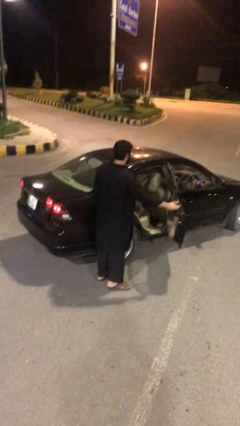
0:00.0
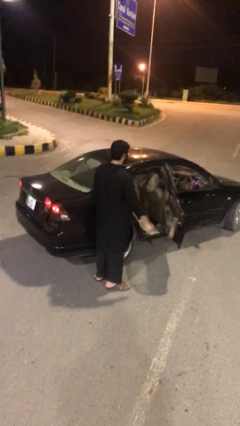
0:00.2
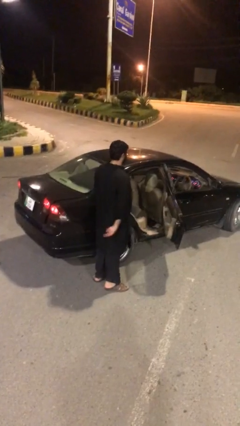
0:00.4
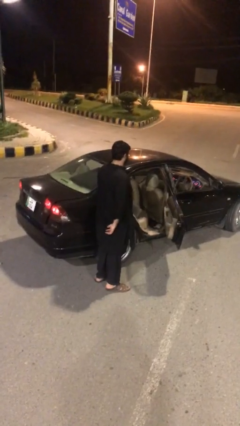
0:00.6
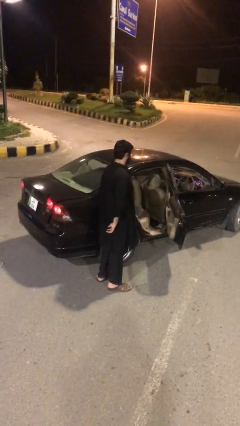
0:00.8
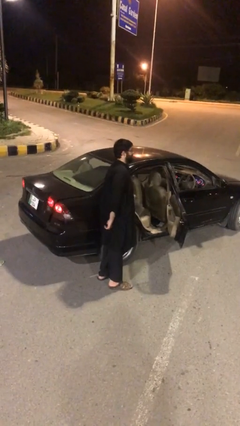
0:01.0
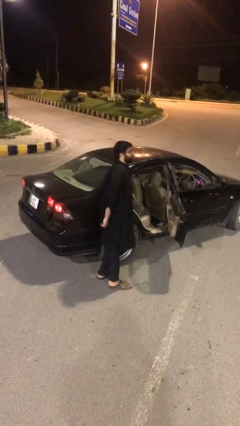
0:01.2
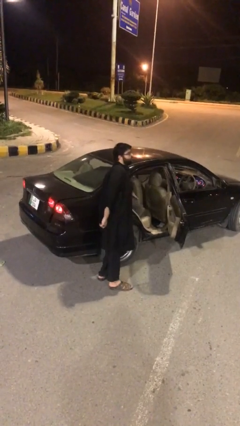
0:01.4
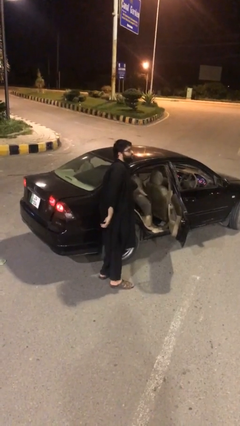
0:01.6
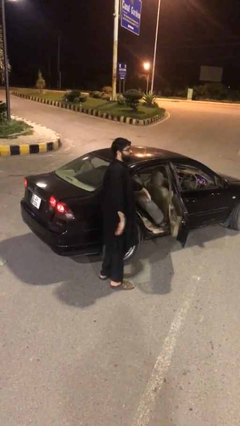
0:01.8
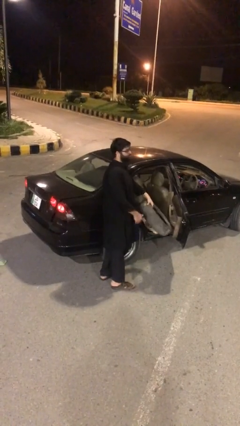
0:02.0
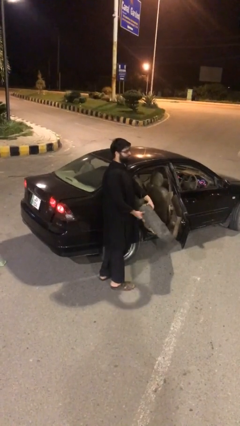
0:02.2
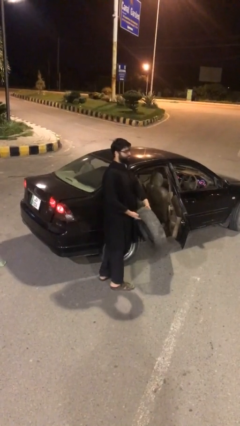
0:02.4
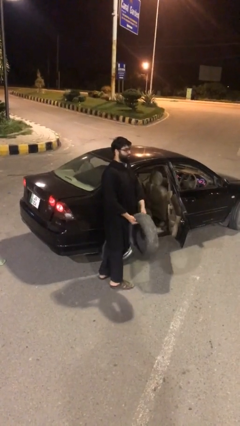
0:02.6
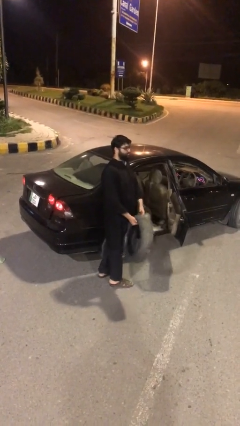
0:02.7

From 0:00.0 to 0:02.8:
person unloads car

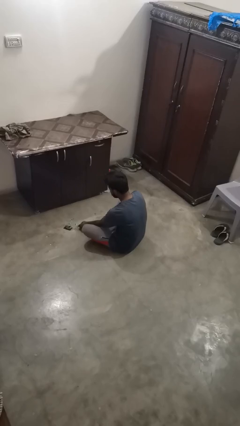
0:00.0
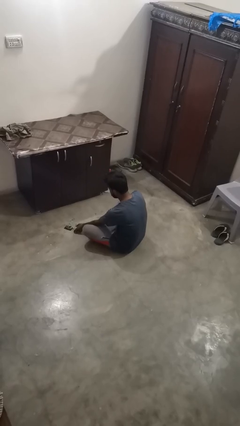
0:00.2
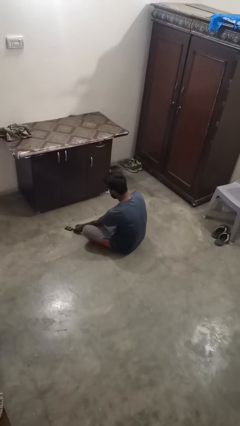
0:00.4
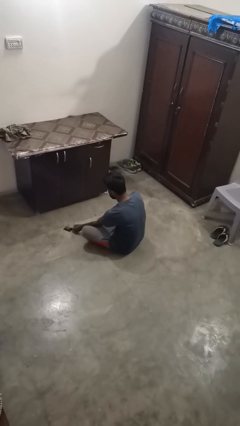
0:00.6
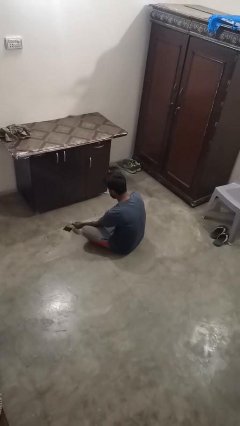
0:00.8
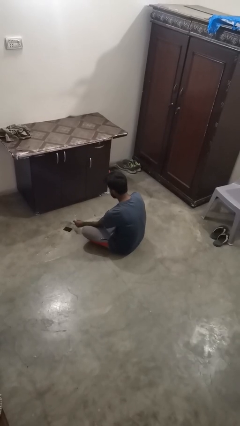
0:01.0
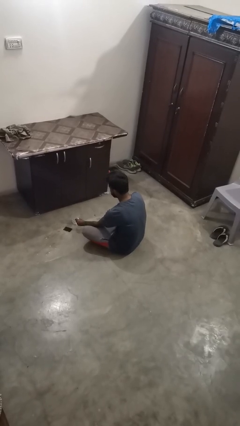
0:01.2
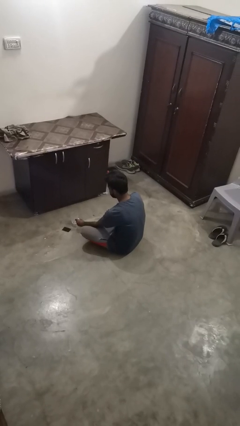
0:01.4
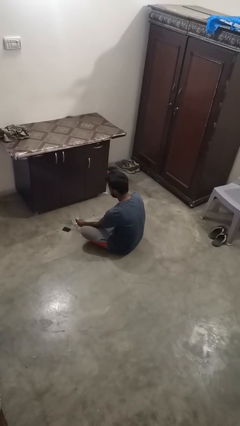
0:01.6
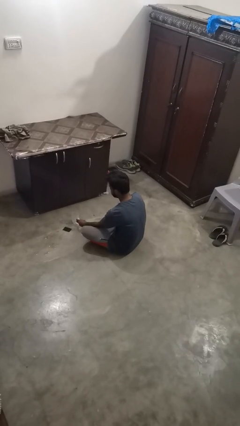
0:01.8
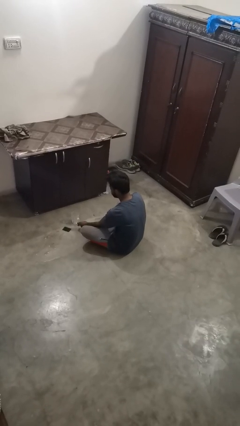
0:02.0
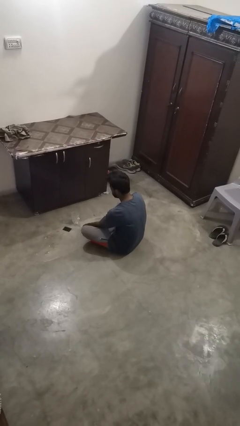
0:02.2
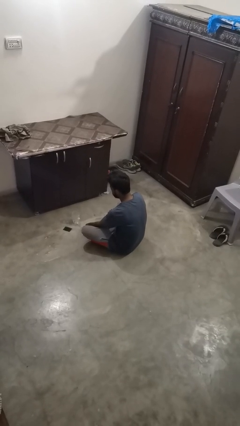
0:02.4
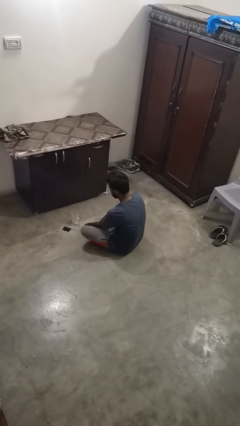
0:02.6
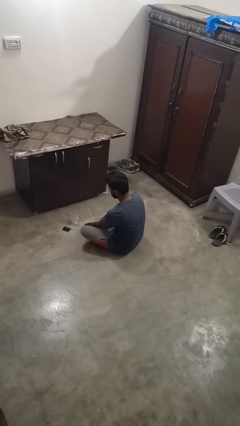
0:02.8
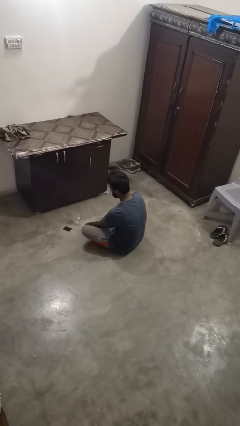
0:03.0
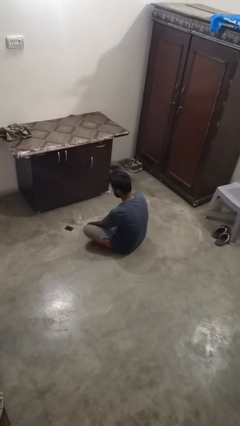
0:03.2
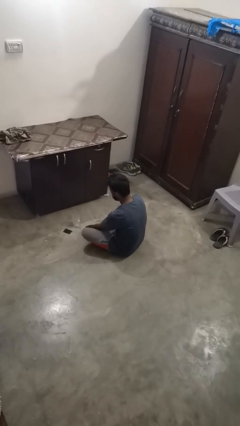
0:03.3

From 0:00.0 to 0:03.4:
person sets upright glass

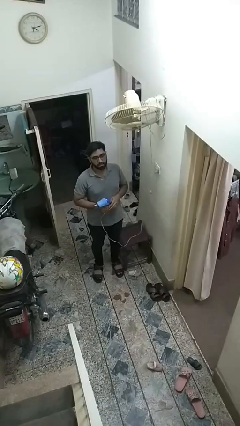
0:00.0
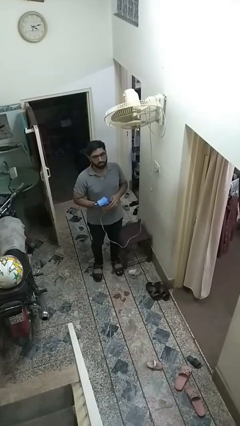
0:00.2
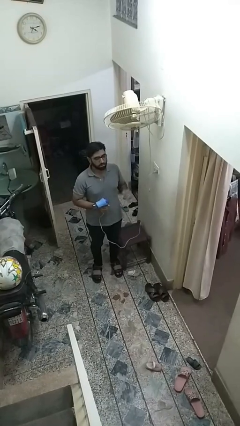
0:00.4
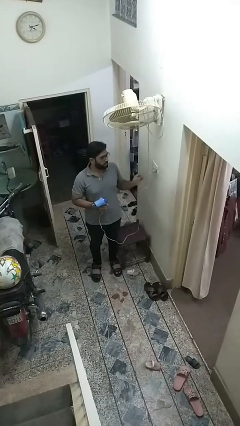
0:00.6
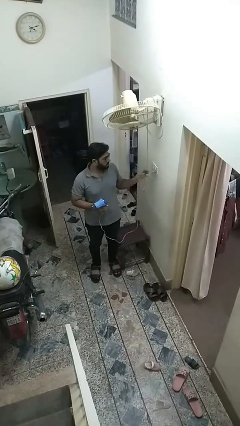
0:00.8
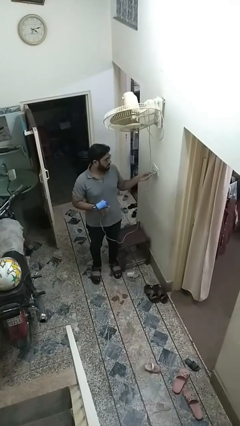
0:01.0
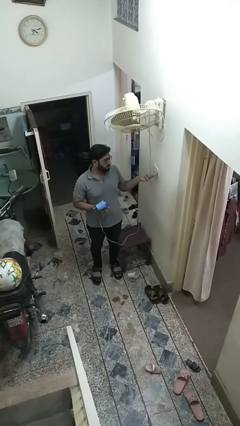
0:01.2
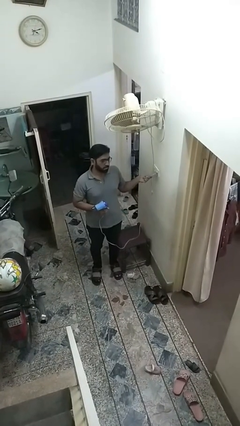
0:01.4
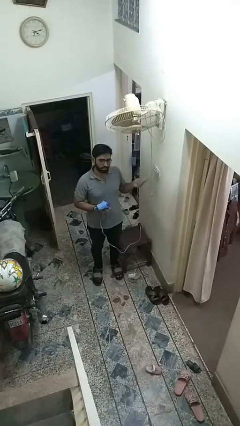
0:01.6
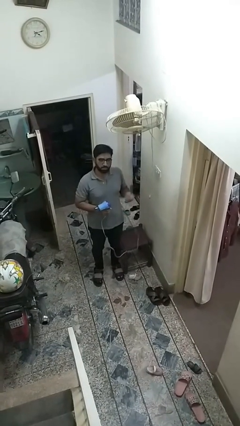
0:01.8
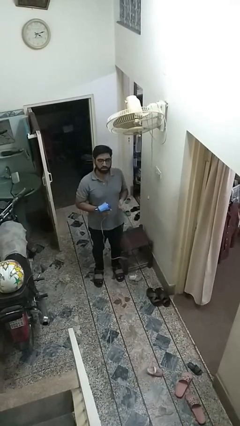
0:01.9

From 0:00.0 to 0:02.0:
person unplugs from electrical socket

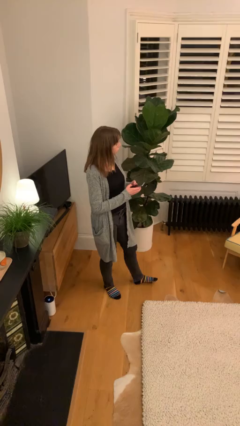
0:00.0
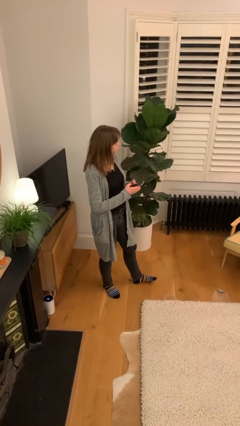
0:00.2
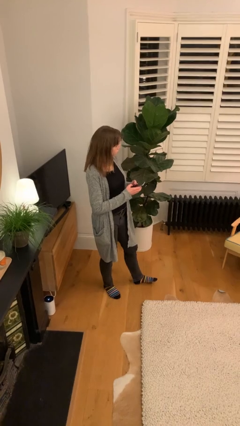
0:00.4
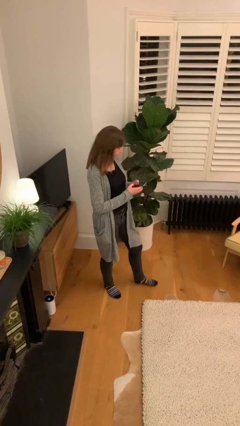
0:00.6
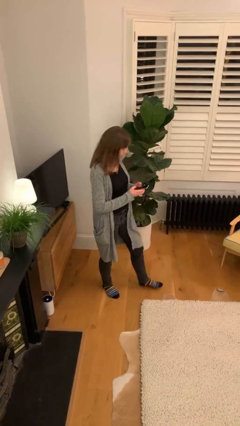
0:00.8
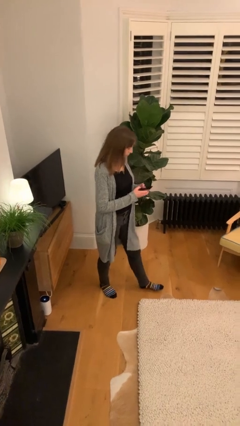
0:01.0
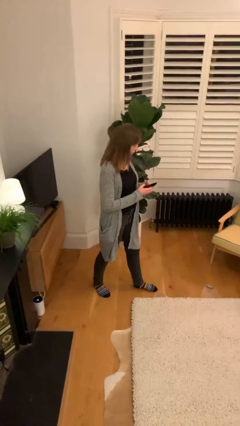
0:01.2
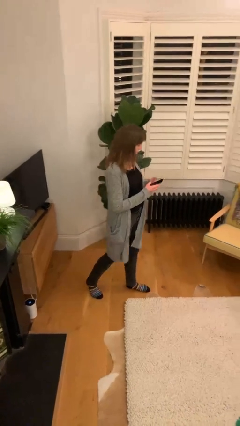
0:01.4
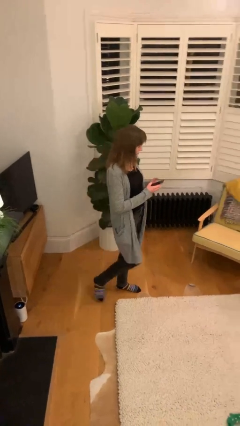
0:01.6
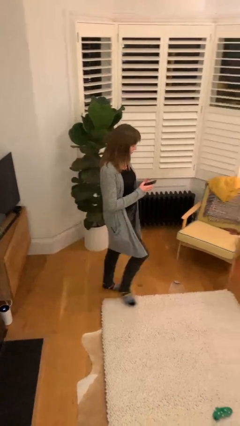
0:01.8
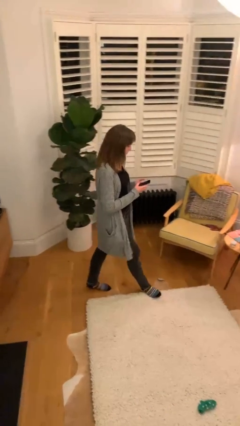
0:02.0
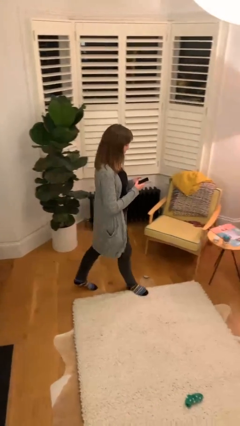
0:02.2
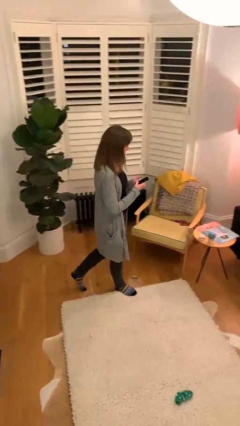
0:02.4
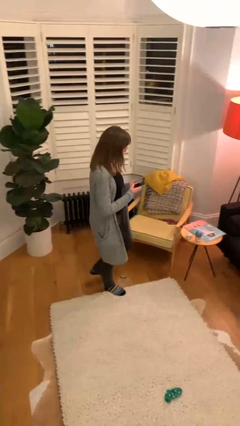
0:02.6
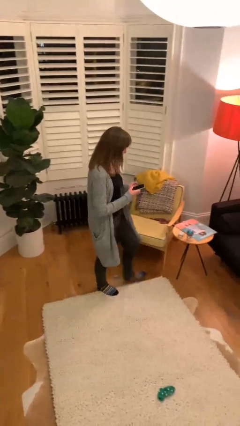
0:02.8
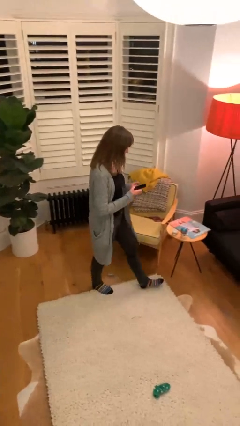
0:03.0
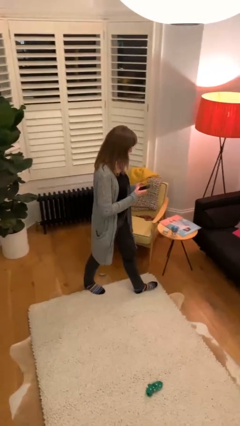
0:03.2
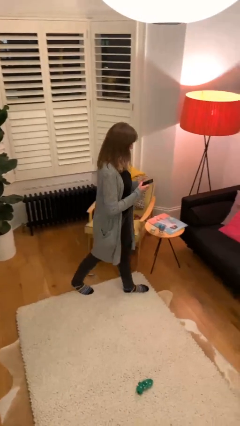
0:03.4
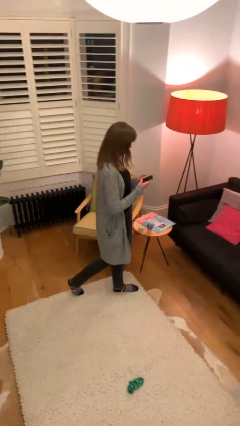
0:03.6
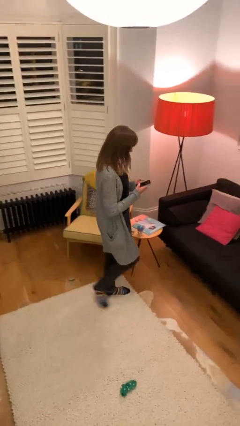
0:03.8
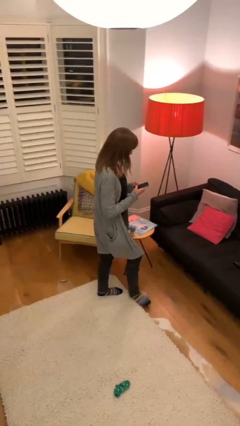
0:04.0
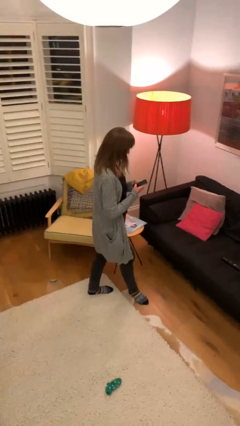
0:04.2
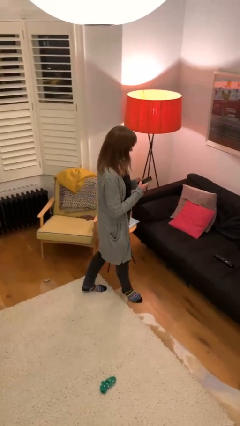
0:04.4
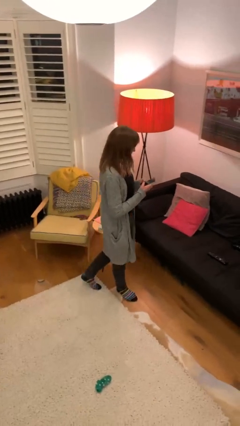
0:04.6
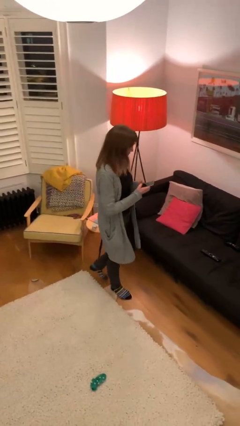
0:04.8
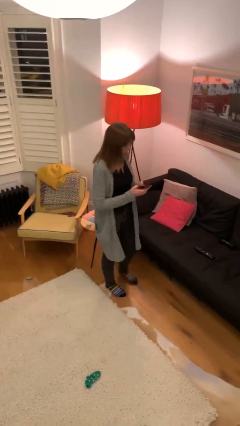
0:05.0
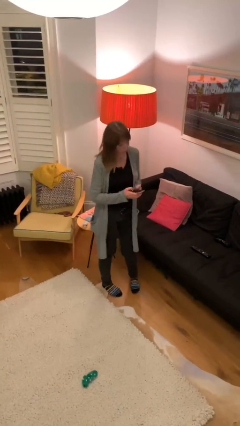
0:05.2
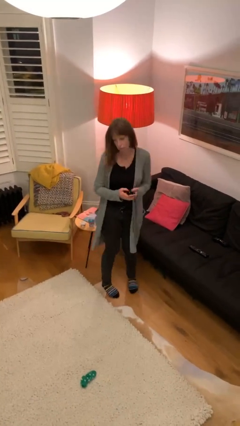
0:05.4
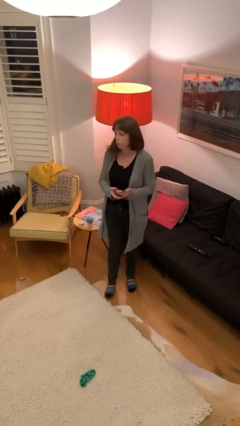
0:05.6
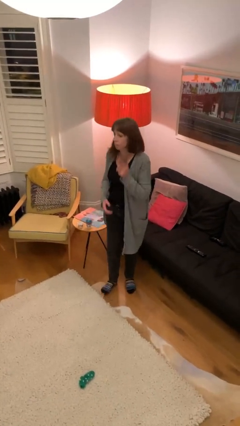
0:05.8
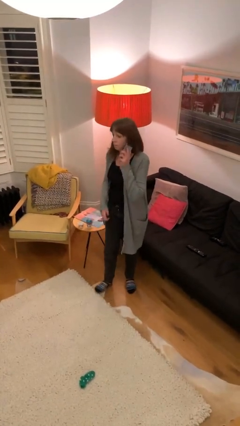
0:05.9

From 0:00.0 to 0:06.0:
person texts on phone

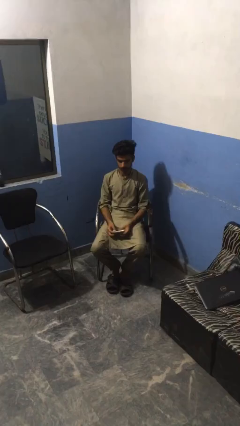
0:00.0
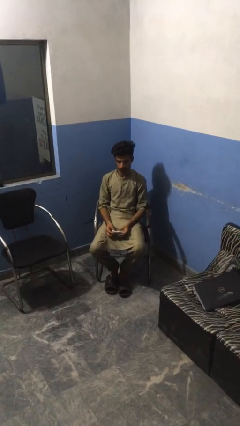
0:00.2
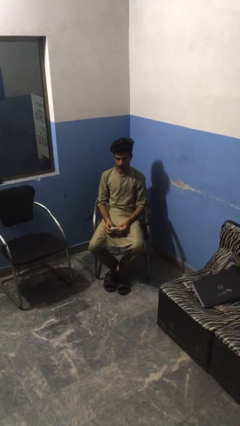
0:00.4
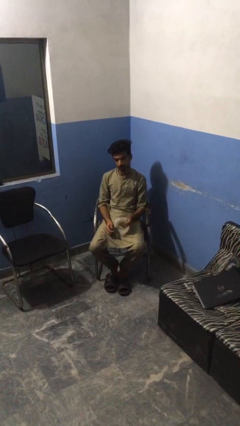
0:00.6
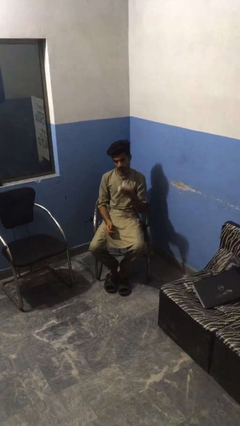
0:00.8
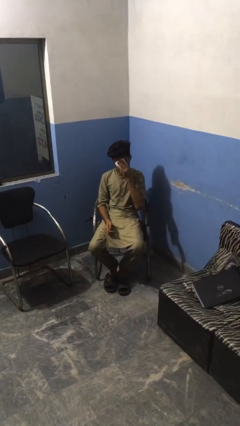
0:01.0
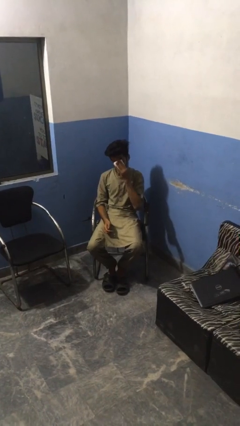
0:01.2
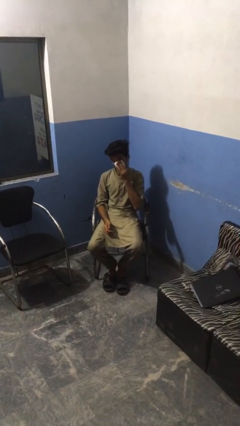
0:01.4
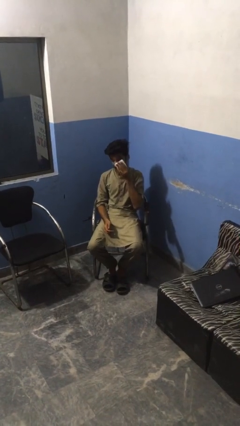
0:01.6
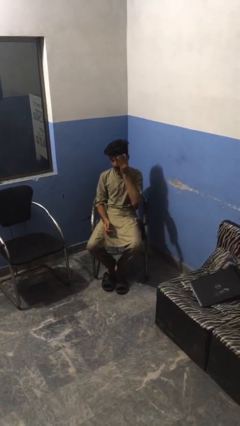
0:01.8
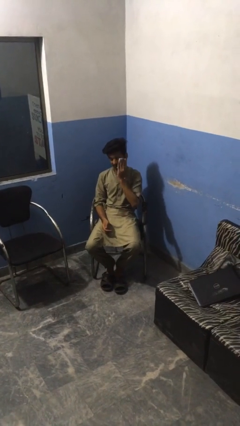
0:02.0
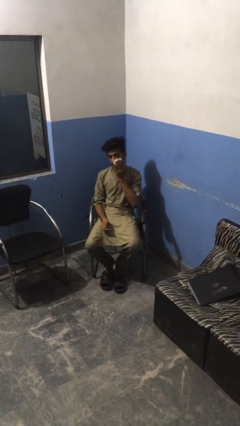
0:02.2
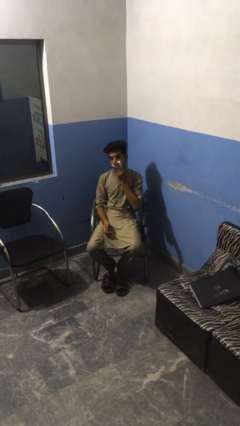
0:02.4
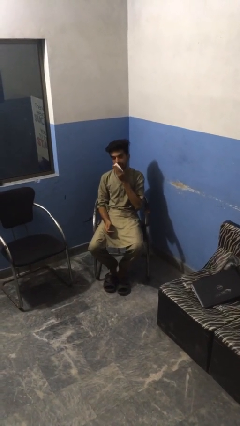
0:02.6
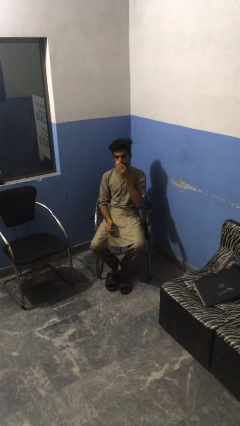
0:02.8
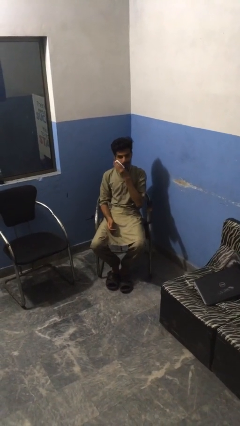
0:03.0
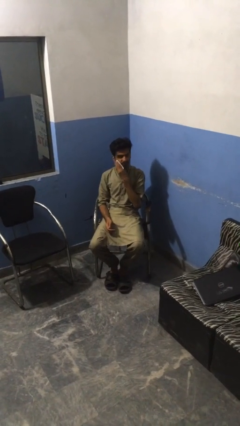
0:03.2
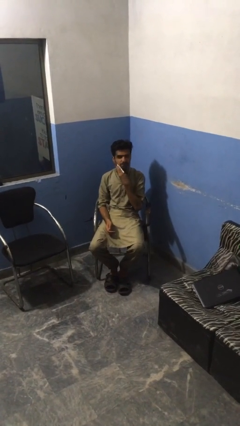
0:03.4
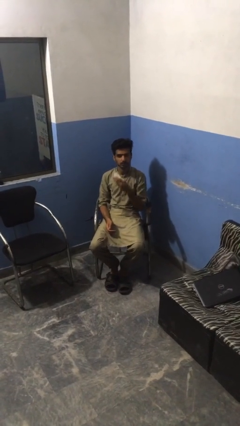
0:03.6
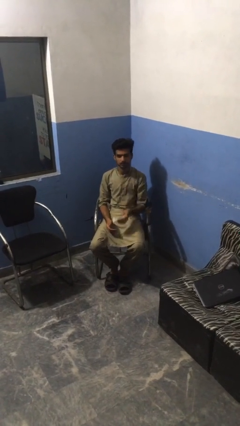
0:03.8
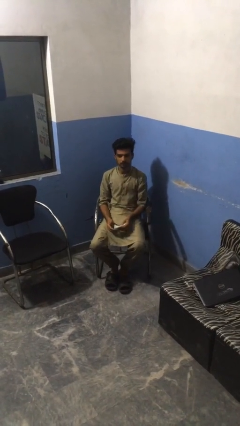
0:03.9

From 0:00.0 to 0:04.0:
person wipes mouth with napkin
